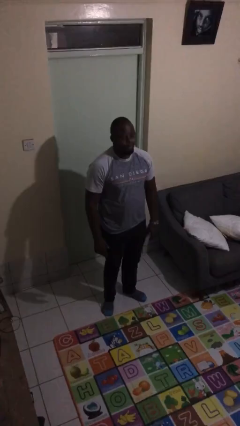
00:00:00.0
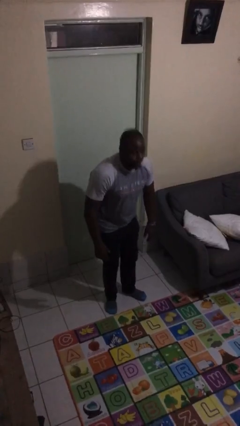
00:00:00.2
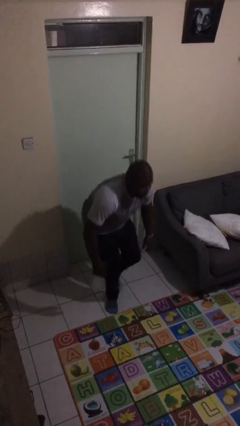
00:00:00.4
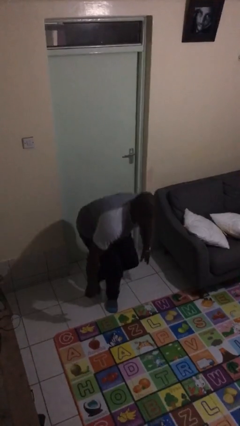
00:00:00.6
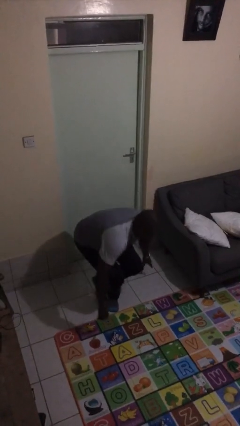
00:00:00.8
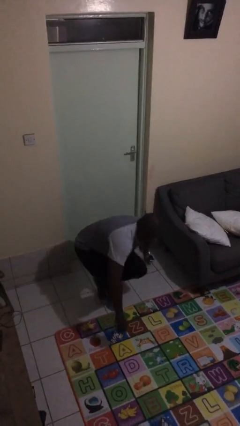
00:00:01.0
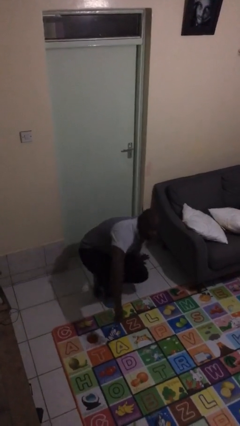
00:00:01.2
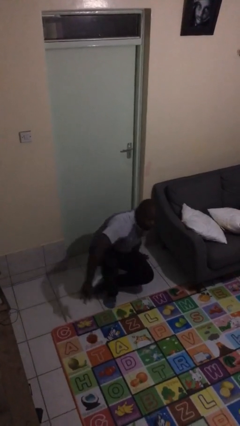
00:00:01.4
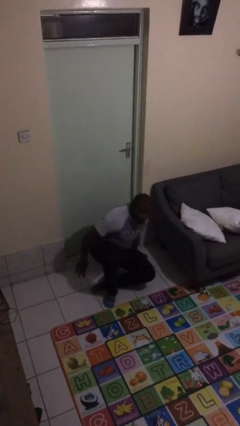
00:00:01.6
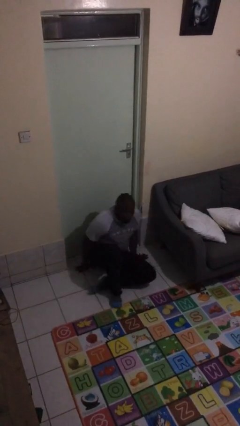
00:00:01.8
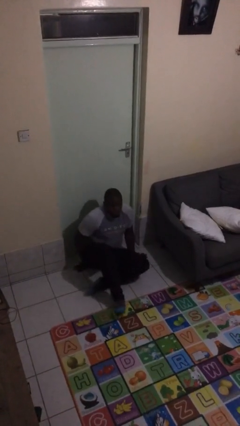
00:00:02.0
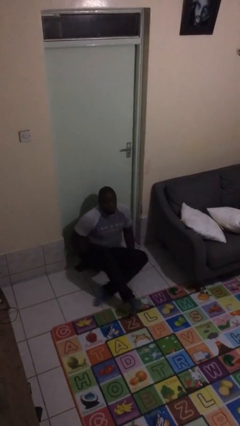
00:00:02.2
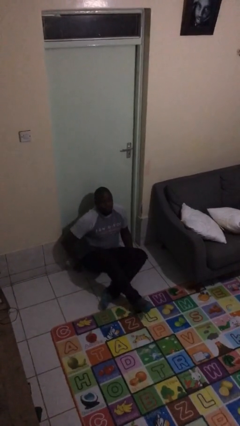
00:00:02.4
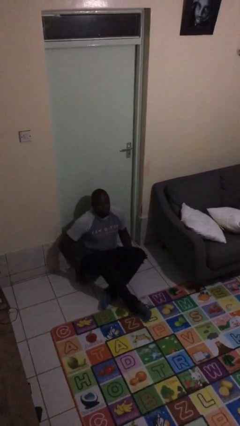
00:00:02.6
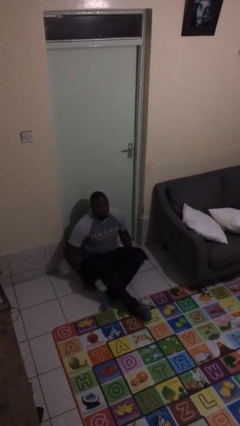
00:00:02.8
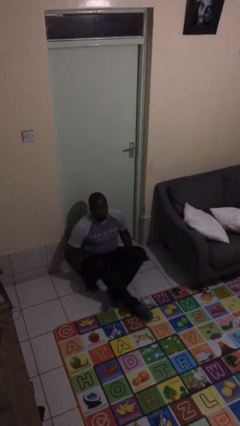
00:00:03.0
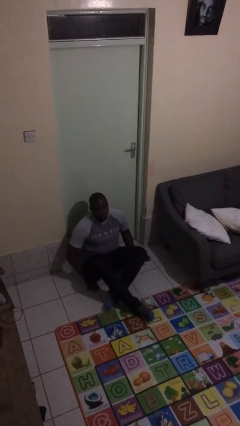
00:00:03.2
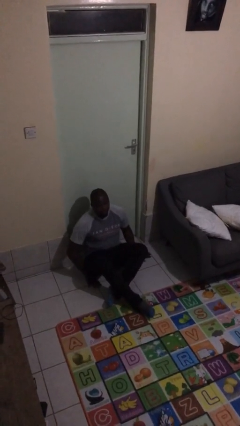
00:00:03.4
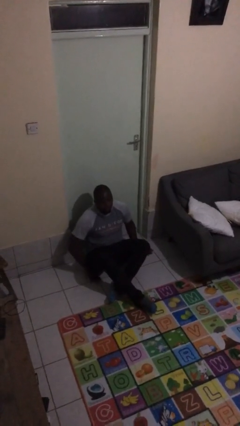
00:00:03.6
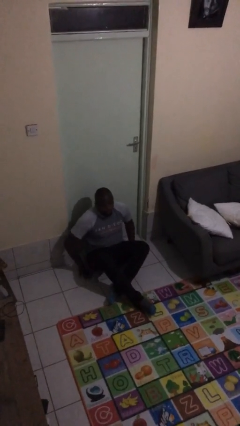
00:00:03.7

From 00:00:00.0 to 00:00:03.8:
person sits crisscross

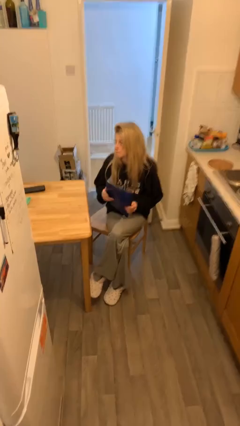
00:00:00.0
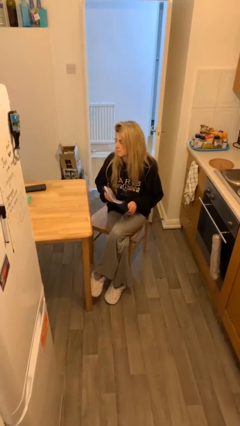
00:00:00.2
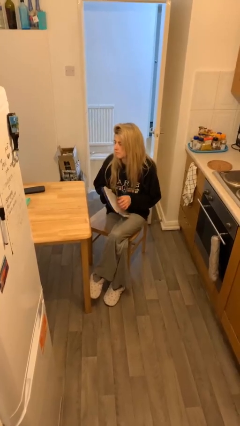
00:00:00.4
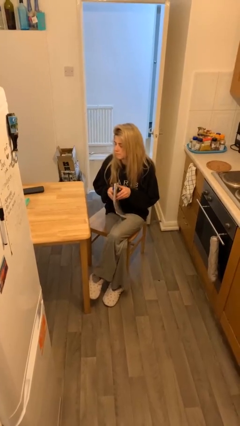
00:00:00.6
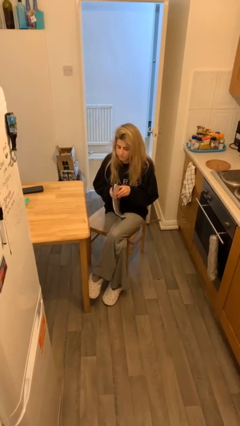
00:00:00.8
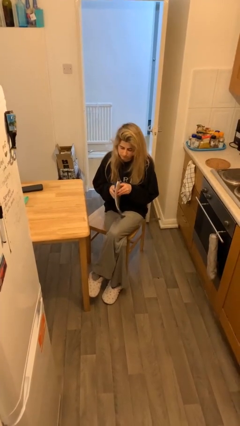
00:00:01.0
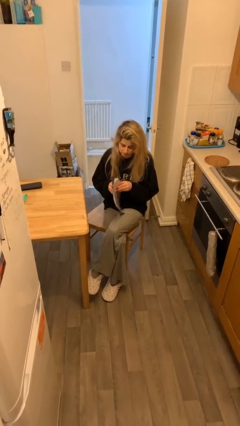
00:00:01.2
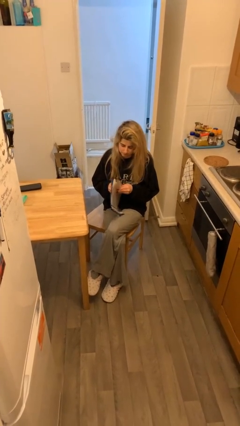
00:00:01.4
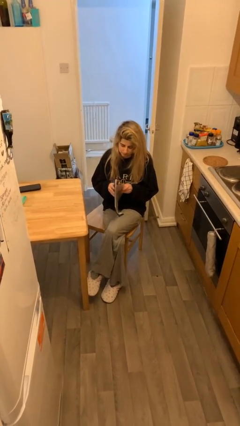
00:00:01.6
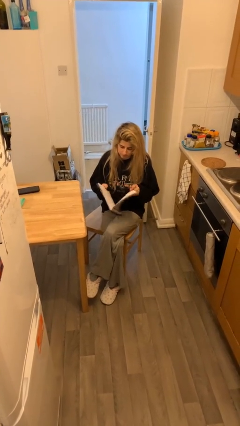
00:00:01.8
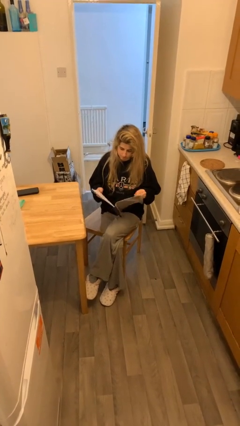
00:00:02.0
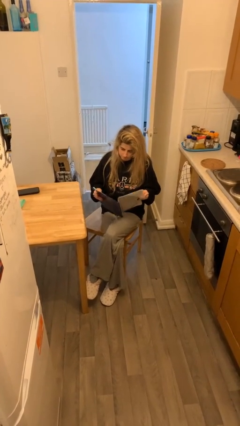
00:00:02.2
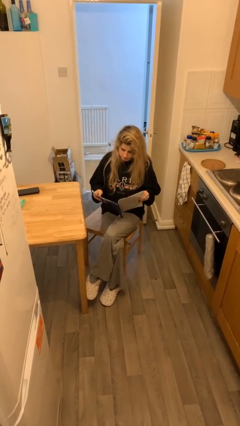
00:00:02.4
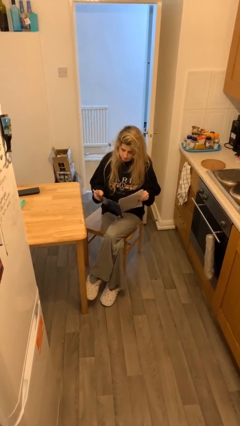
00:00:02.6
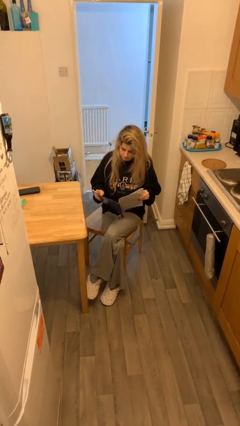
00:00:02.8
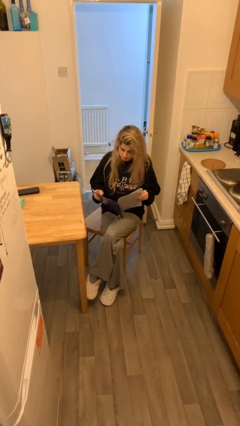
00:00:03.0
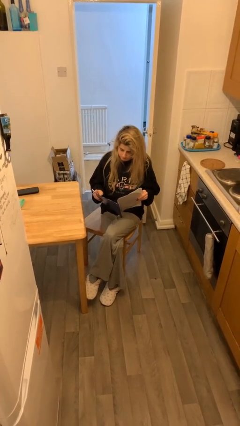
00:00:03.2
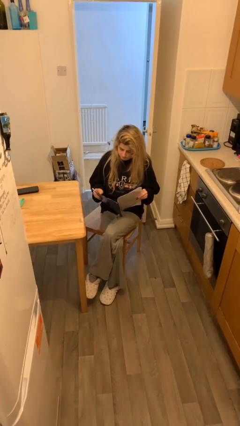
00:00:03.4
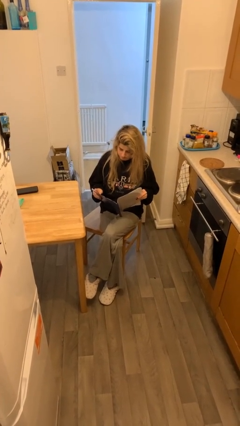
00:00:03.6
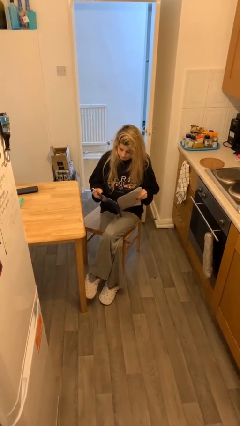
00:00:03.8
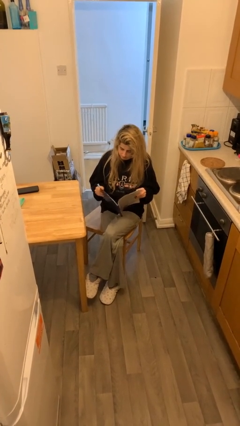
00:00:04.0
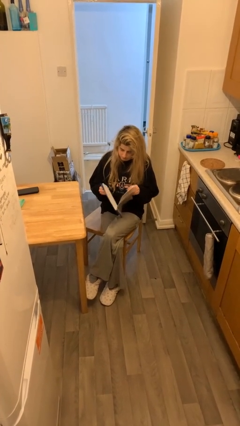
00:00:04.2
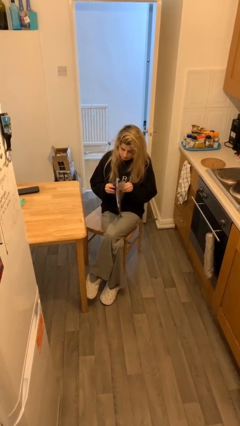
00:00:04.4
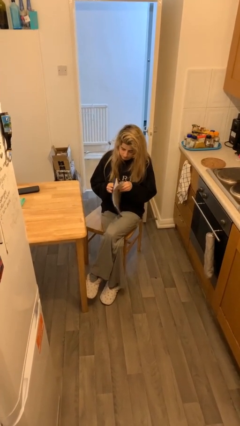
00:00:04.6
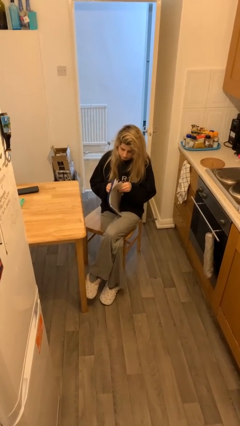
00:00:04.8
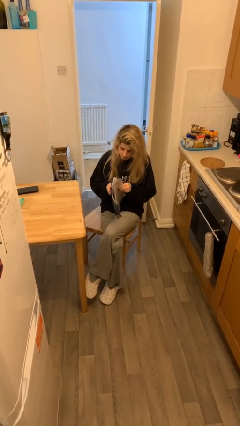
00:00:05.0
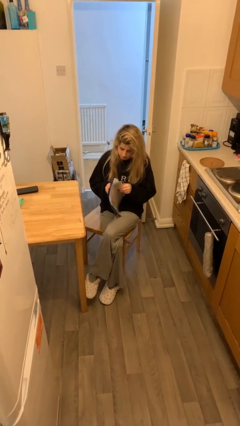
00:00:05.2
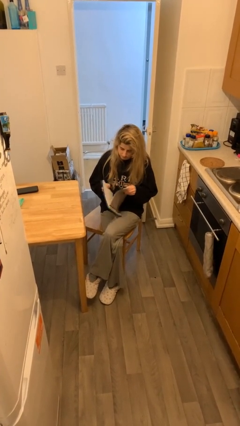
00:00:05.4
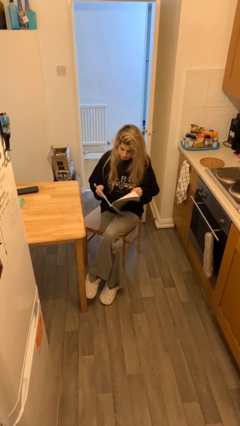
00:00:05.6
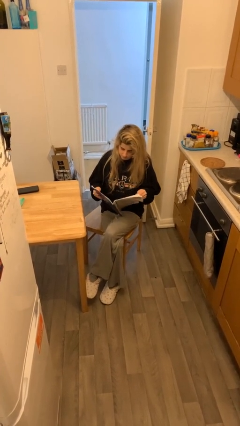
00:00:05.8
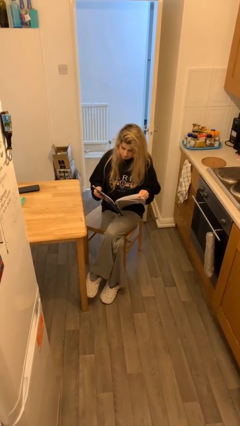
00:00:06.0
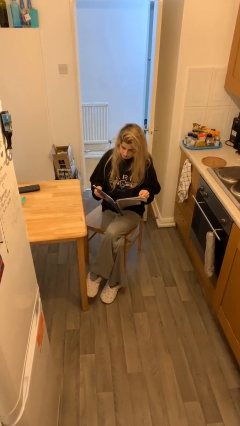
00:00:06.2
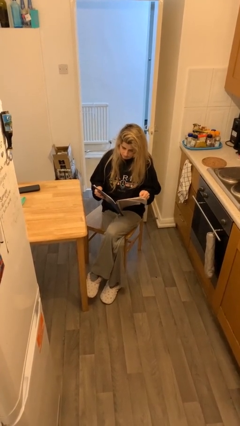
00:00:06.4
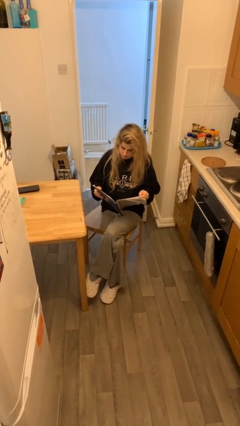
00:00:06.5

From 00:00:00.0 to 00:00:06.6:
person reads document

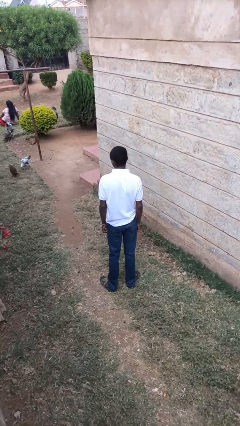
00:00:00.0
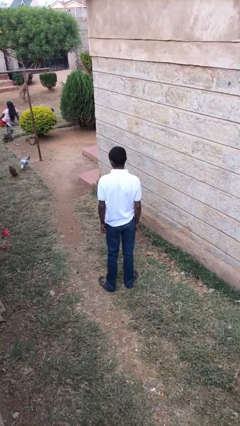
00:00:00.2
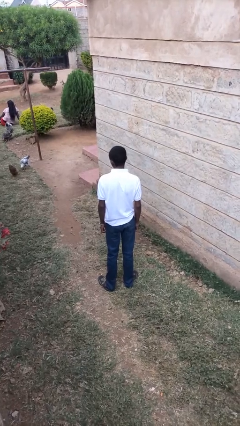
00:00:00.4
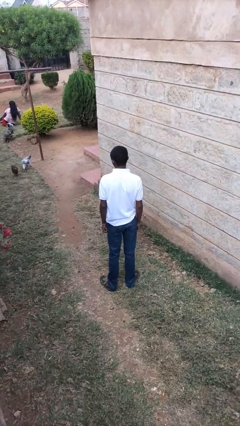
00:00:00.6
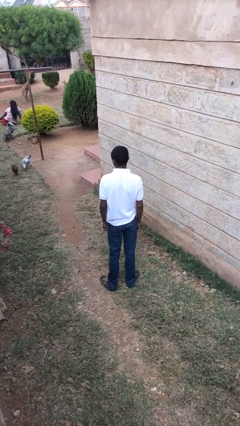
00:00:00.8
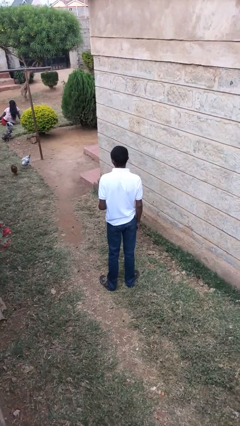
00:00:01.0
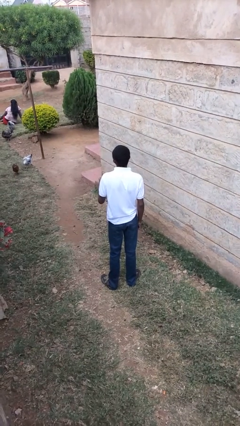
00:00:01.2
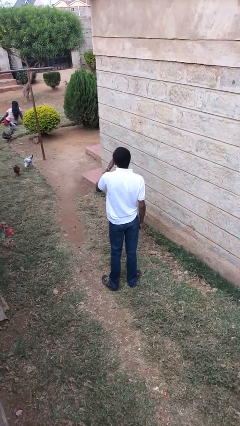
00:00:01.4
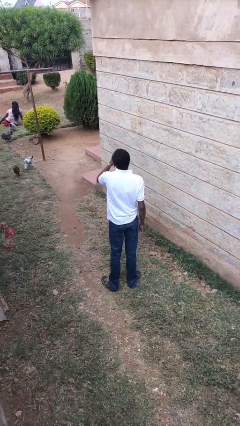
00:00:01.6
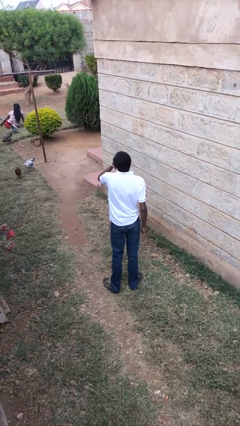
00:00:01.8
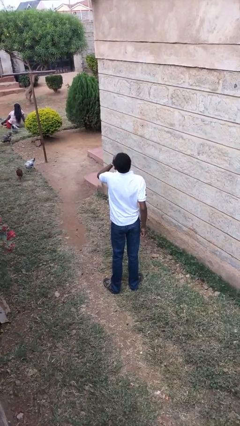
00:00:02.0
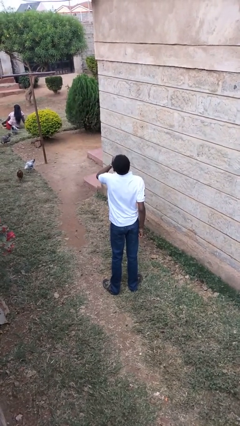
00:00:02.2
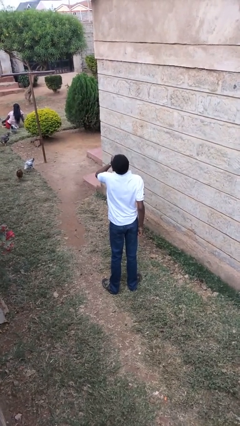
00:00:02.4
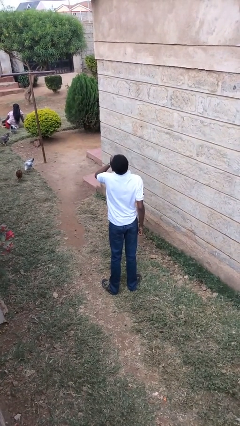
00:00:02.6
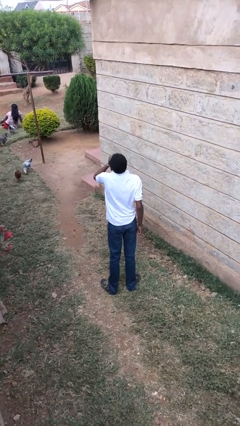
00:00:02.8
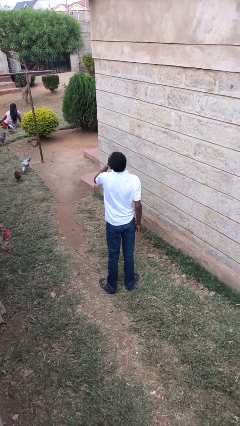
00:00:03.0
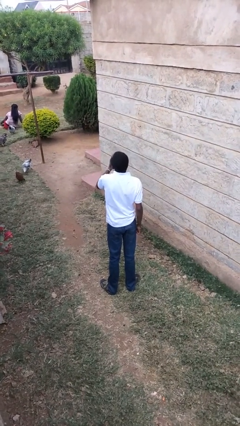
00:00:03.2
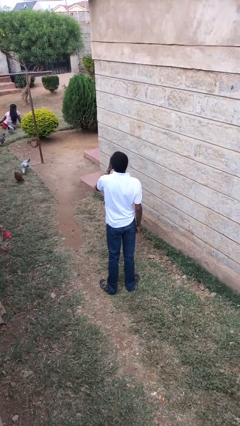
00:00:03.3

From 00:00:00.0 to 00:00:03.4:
person yawns

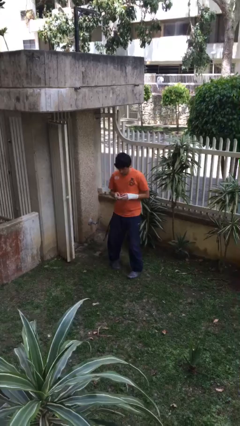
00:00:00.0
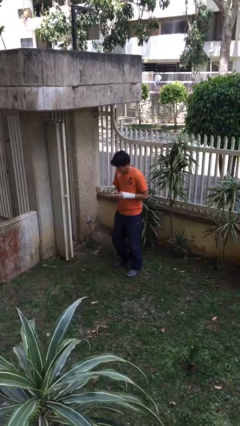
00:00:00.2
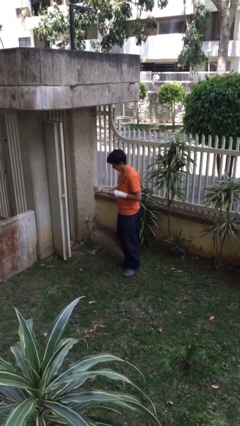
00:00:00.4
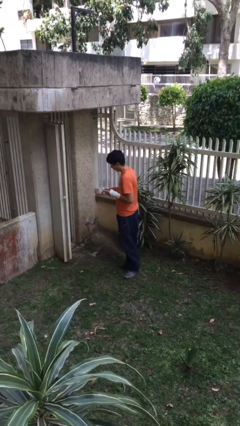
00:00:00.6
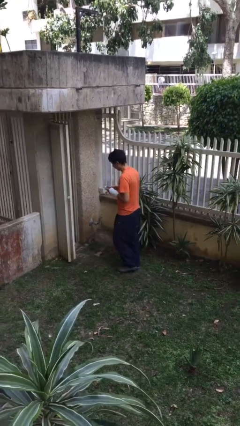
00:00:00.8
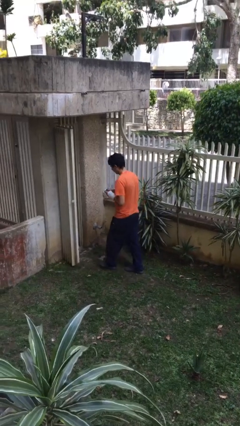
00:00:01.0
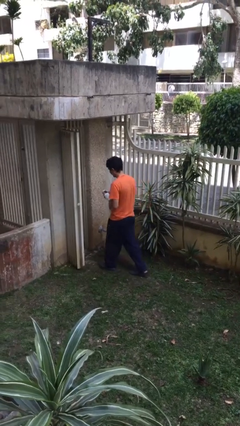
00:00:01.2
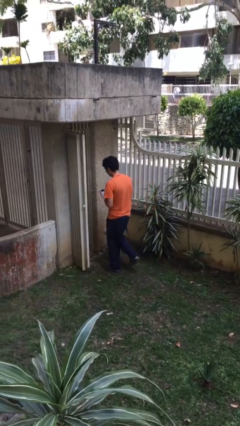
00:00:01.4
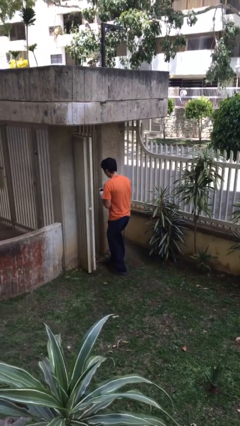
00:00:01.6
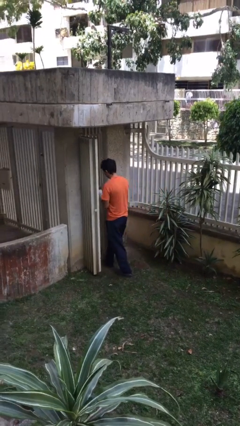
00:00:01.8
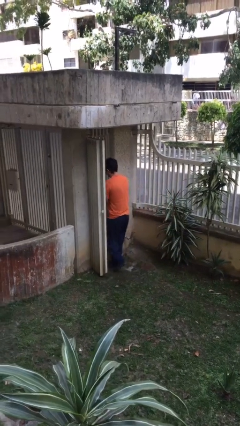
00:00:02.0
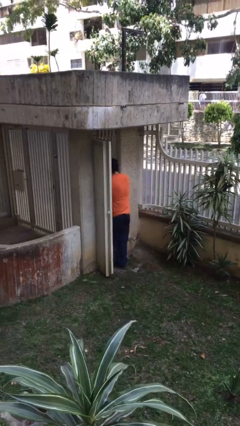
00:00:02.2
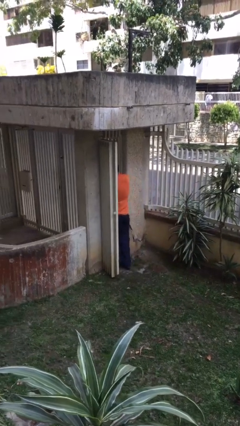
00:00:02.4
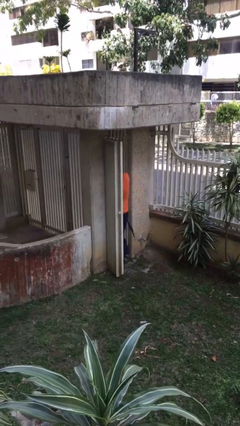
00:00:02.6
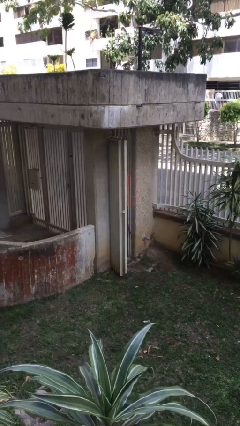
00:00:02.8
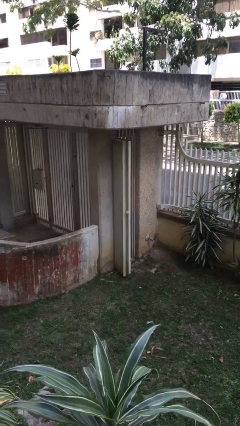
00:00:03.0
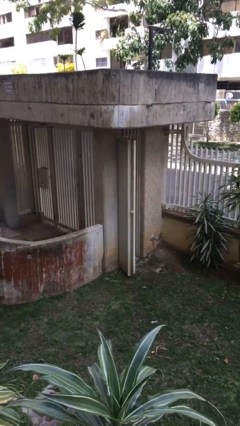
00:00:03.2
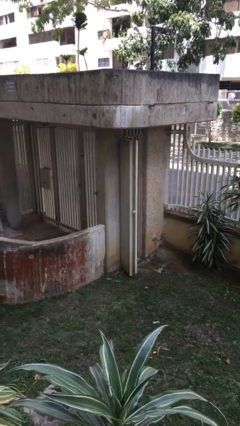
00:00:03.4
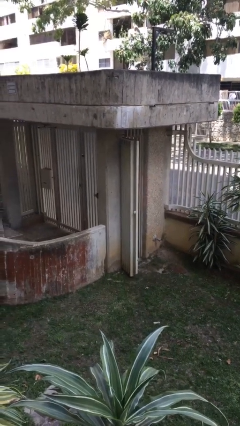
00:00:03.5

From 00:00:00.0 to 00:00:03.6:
person exits scene through structure
